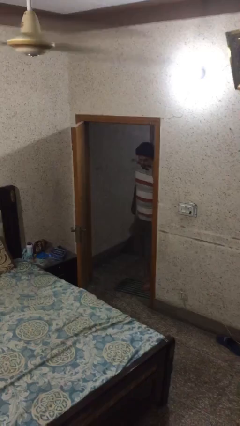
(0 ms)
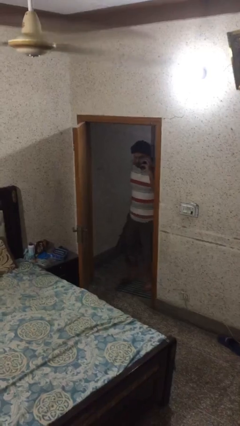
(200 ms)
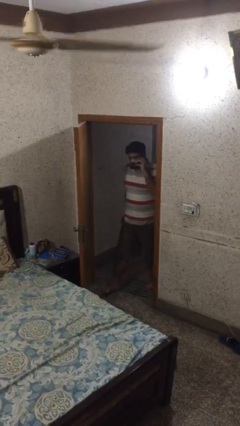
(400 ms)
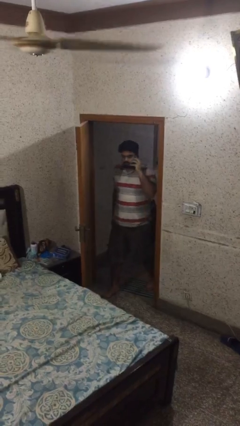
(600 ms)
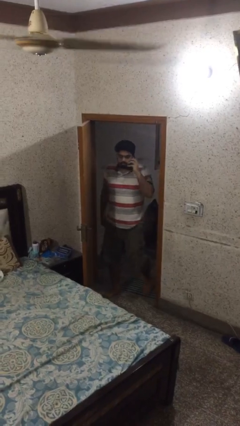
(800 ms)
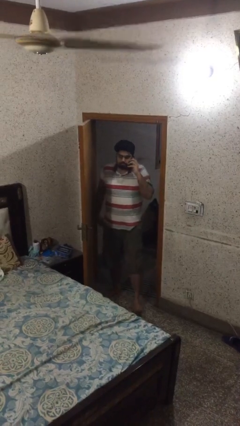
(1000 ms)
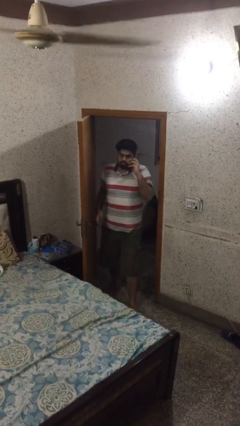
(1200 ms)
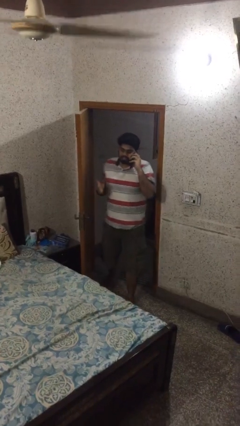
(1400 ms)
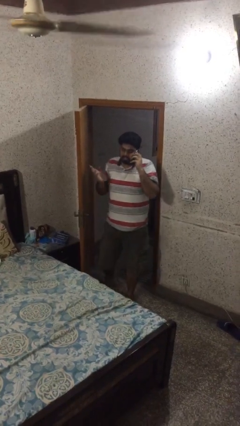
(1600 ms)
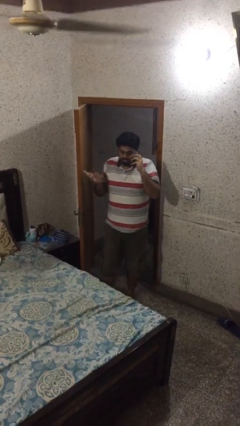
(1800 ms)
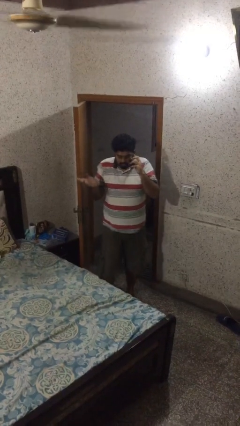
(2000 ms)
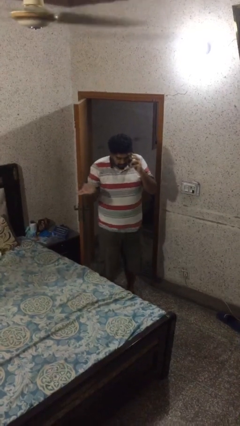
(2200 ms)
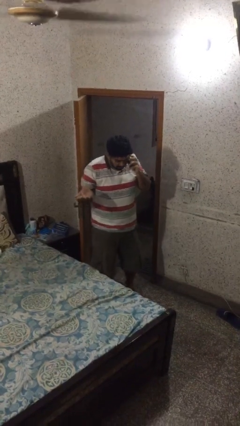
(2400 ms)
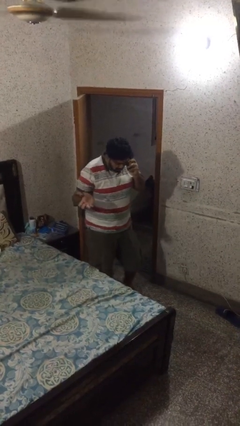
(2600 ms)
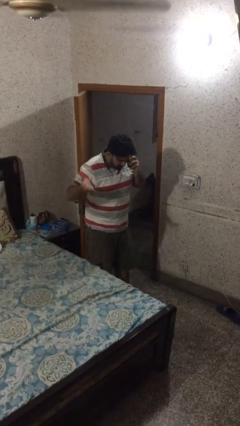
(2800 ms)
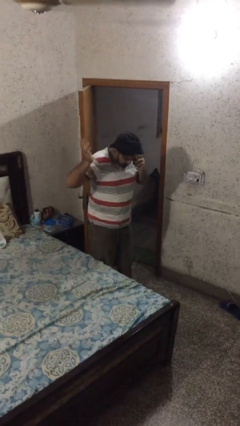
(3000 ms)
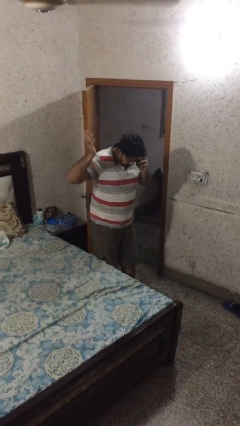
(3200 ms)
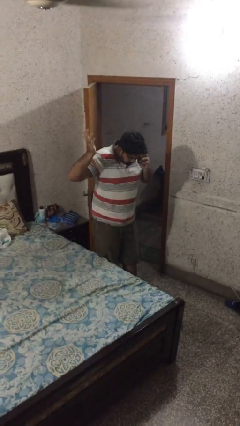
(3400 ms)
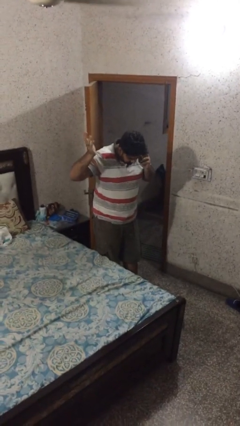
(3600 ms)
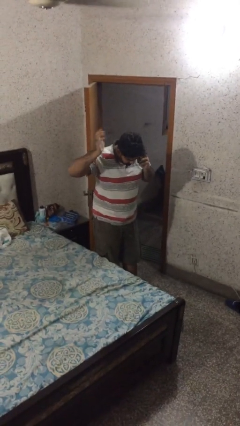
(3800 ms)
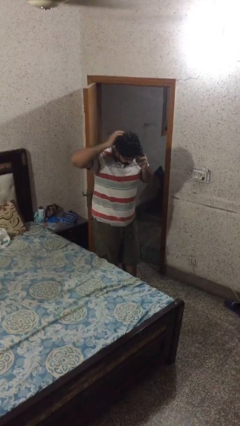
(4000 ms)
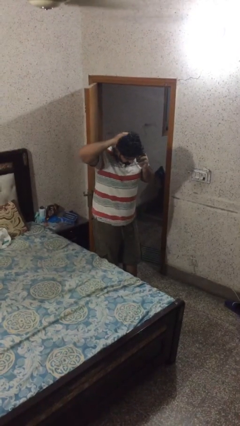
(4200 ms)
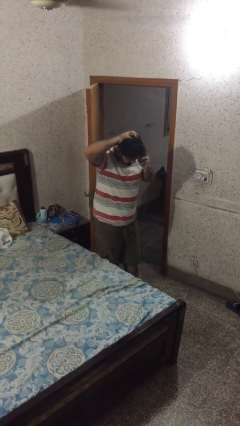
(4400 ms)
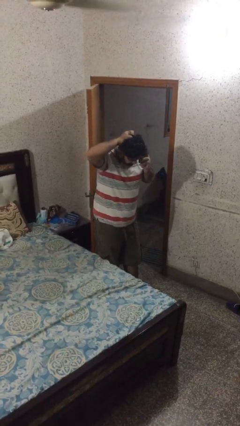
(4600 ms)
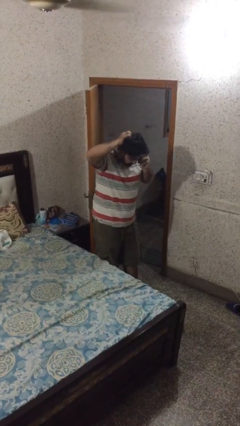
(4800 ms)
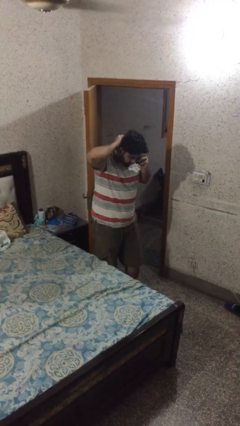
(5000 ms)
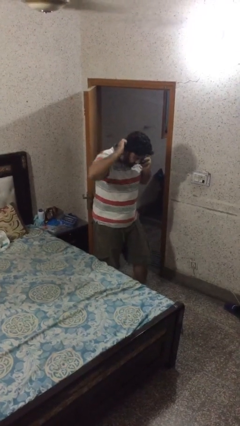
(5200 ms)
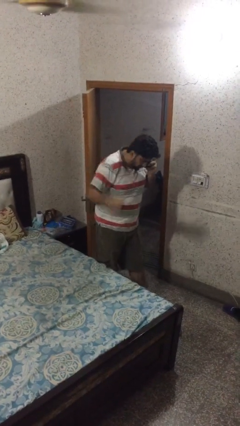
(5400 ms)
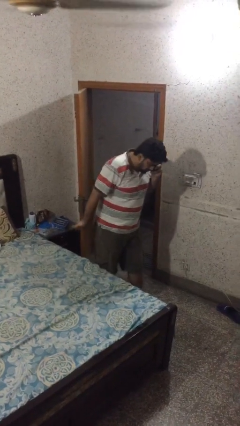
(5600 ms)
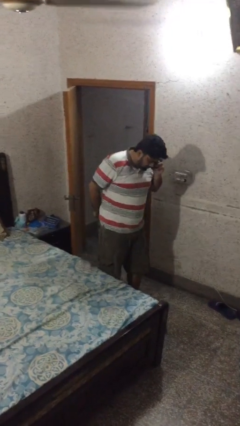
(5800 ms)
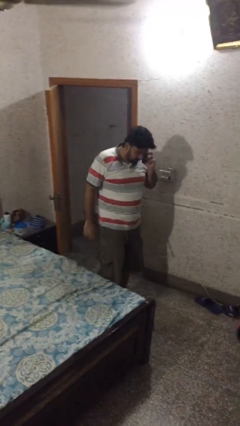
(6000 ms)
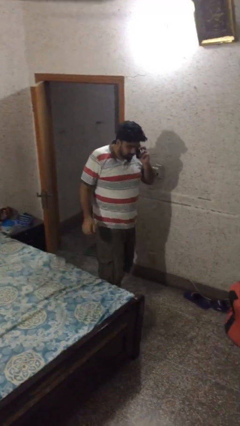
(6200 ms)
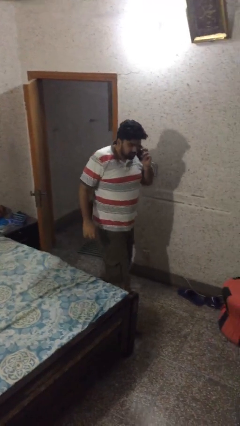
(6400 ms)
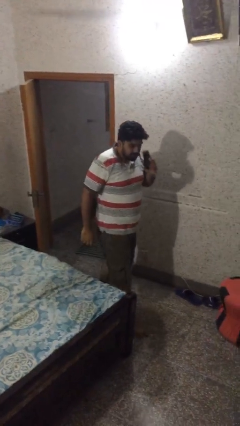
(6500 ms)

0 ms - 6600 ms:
person enters scene through structure

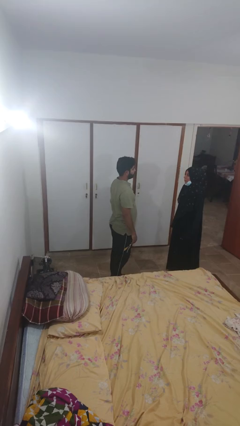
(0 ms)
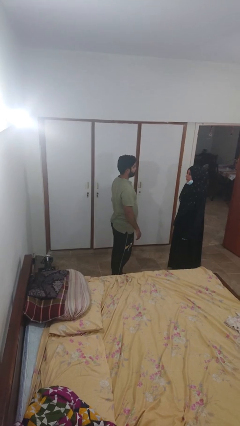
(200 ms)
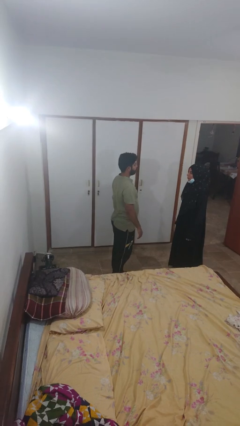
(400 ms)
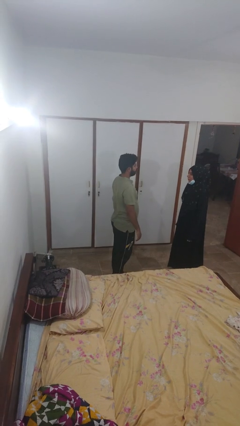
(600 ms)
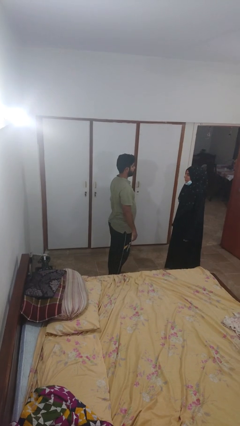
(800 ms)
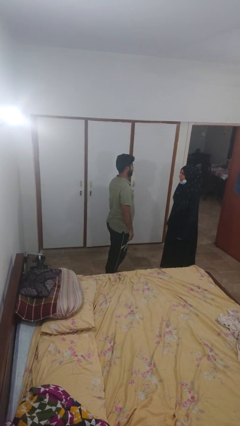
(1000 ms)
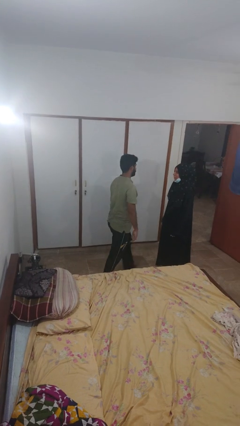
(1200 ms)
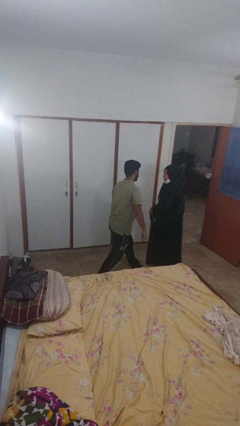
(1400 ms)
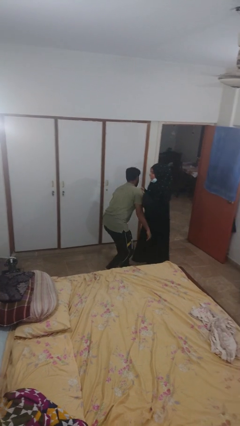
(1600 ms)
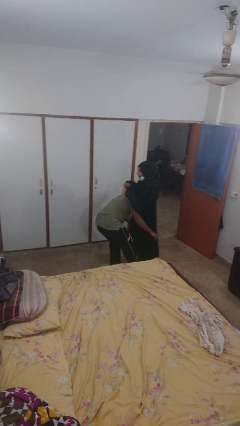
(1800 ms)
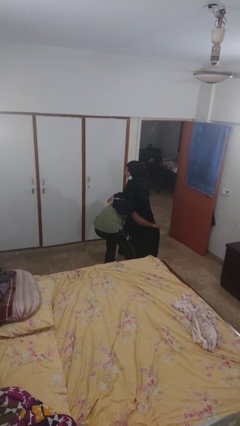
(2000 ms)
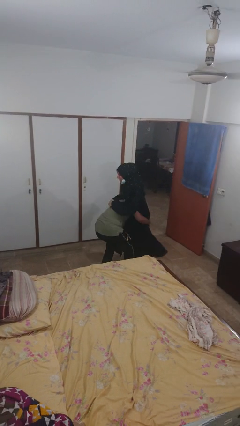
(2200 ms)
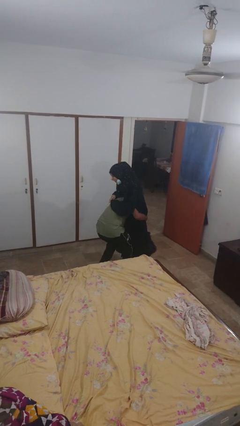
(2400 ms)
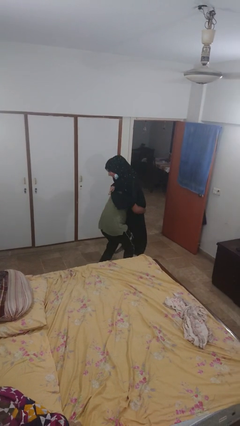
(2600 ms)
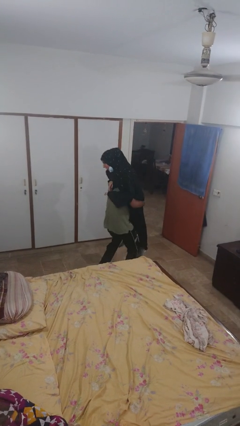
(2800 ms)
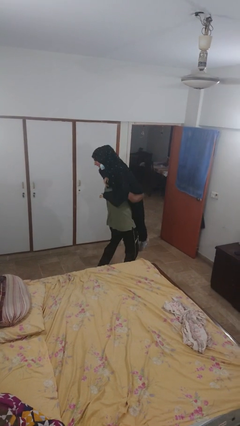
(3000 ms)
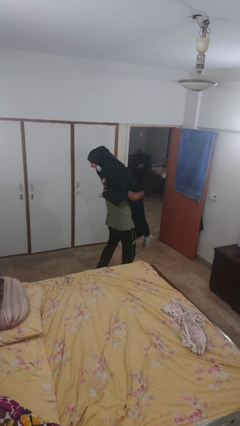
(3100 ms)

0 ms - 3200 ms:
person carries person over shoulder

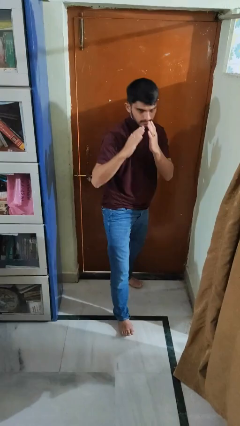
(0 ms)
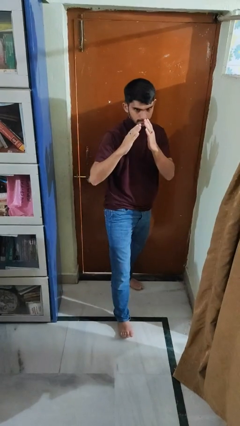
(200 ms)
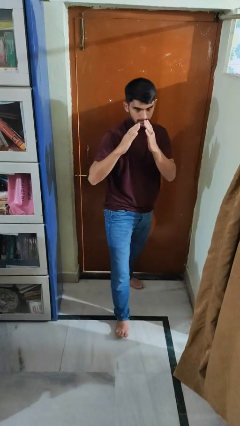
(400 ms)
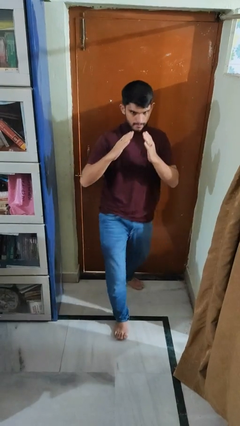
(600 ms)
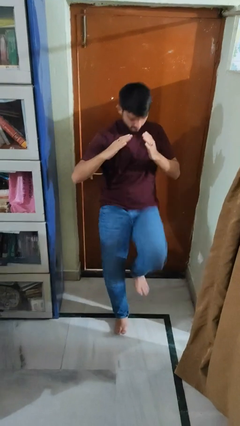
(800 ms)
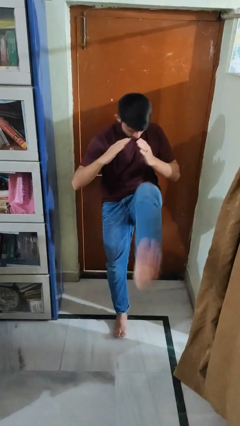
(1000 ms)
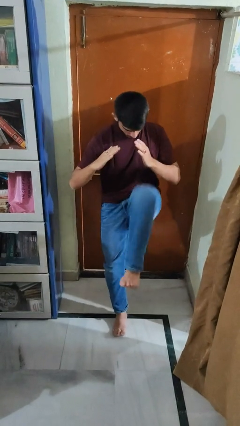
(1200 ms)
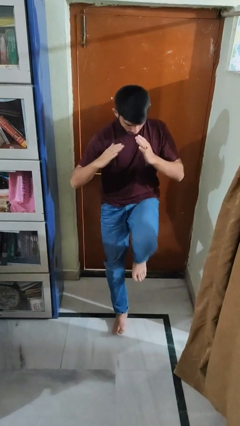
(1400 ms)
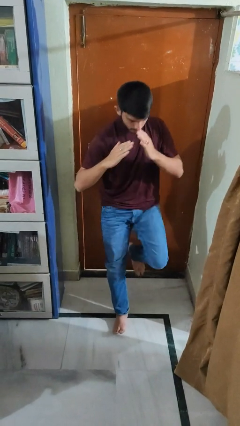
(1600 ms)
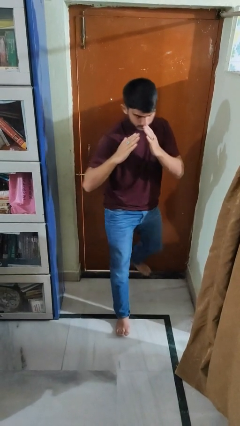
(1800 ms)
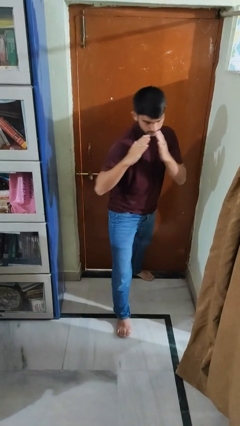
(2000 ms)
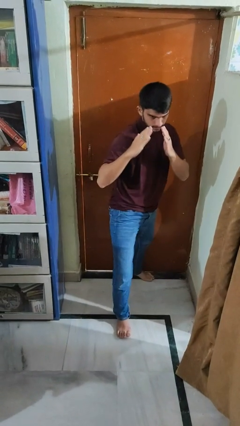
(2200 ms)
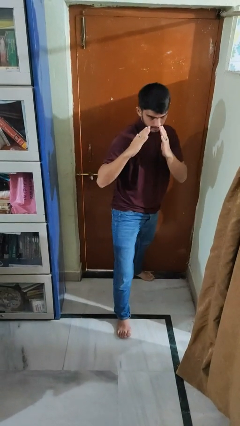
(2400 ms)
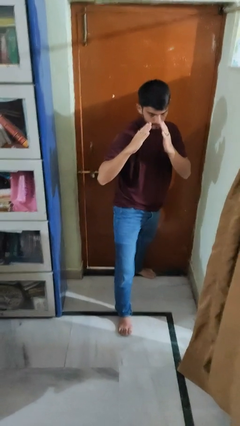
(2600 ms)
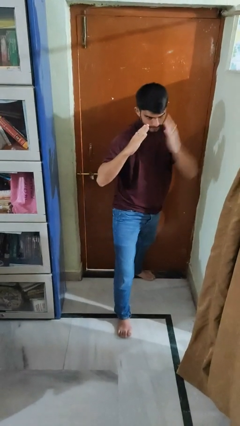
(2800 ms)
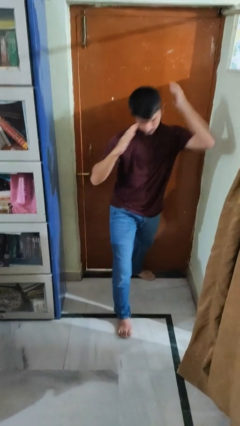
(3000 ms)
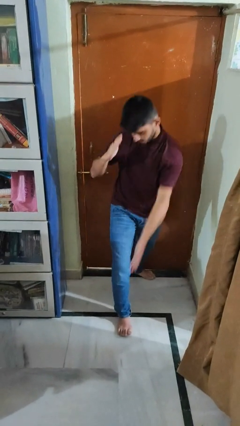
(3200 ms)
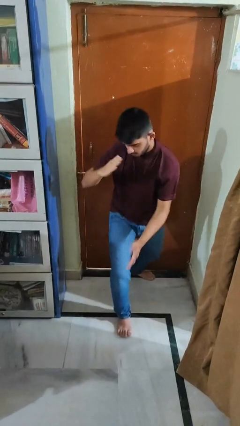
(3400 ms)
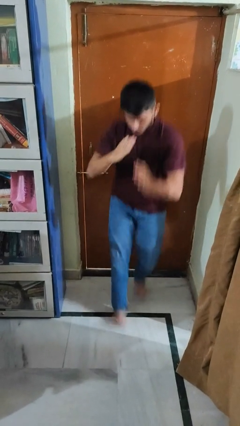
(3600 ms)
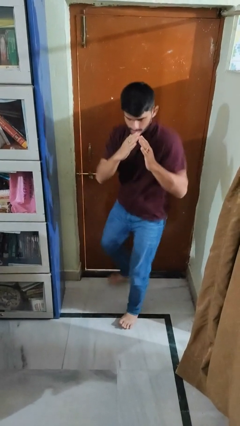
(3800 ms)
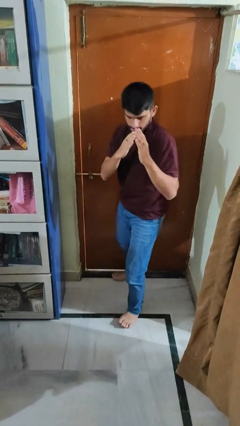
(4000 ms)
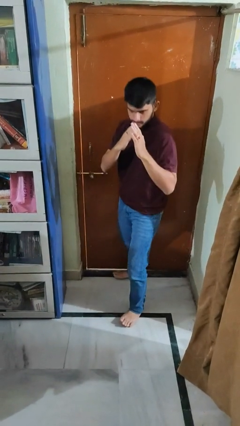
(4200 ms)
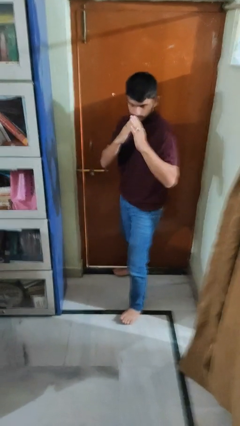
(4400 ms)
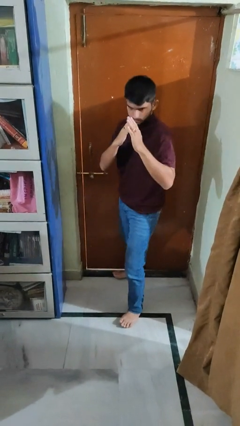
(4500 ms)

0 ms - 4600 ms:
person karate kicks

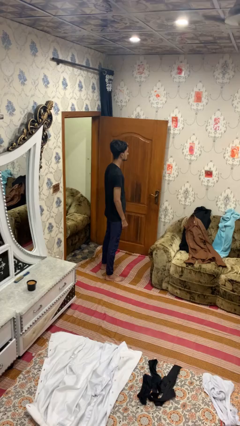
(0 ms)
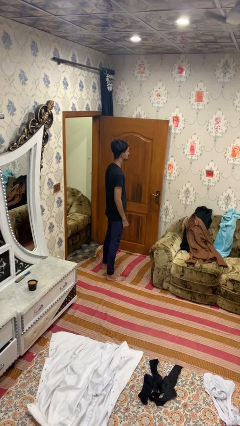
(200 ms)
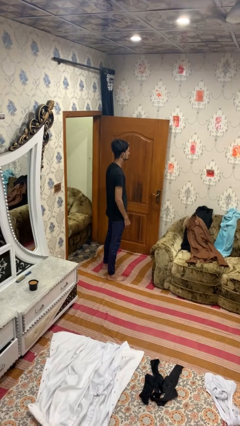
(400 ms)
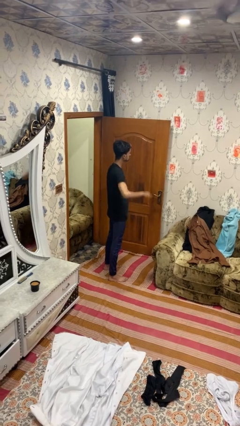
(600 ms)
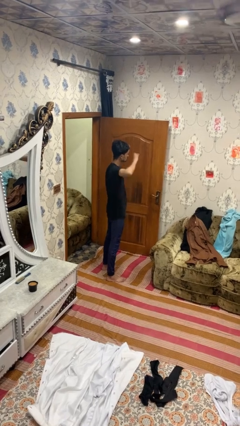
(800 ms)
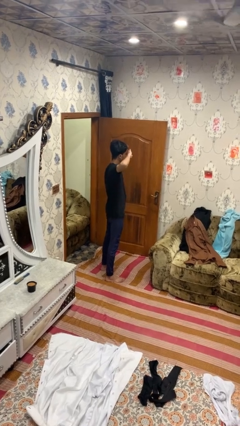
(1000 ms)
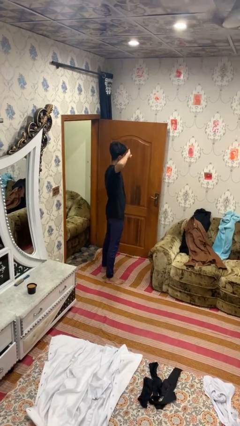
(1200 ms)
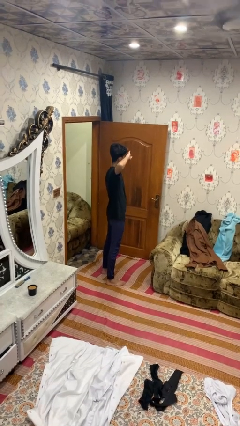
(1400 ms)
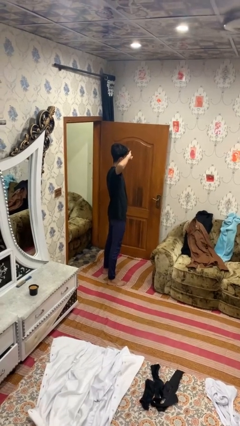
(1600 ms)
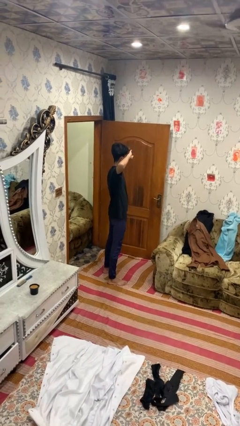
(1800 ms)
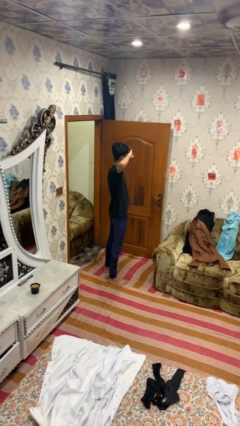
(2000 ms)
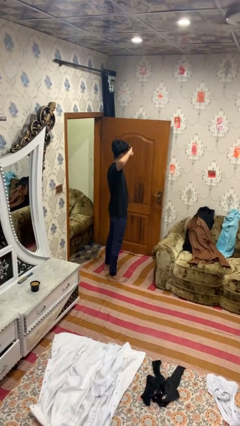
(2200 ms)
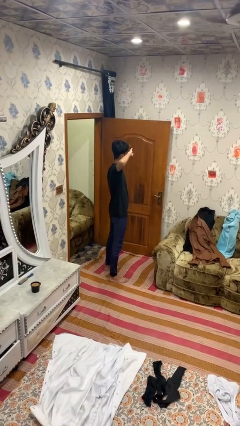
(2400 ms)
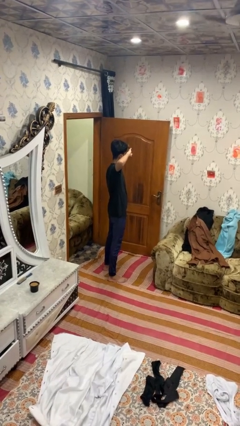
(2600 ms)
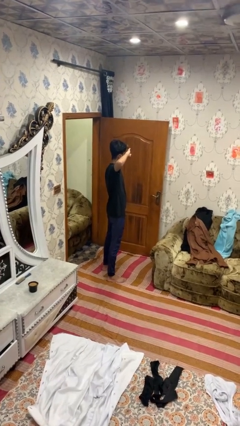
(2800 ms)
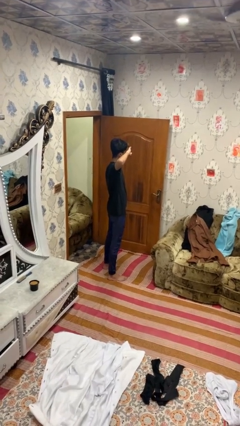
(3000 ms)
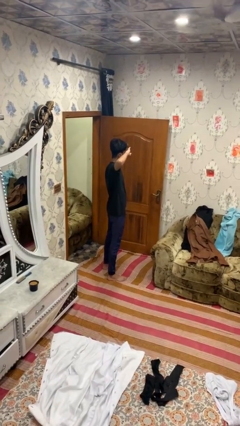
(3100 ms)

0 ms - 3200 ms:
person salutes
